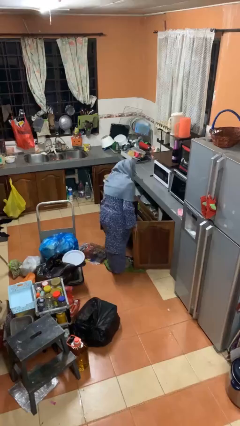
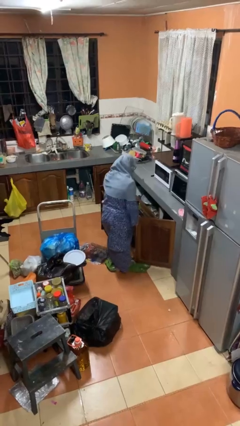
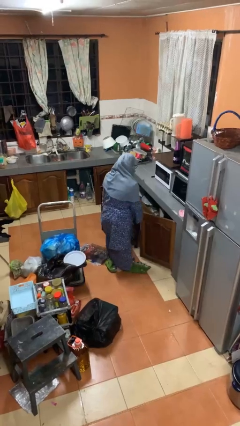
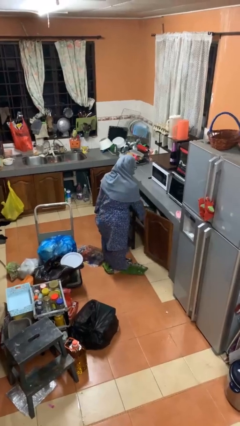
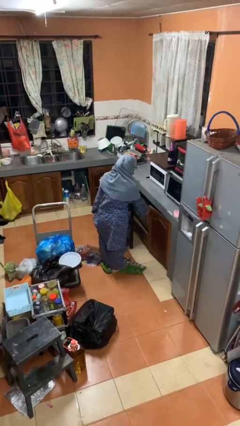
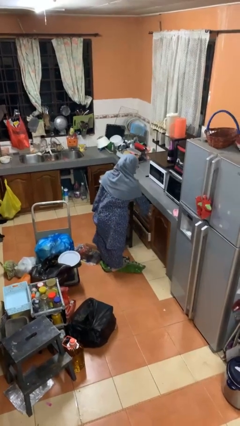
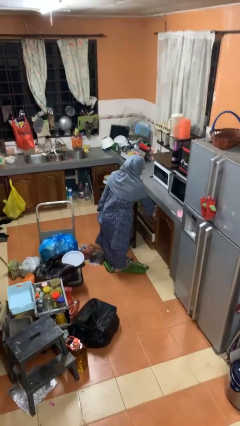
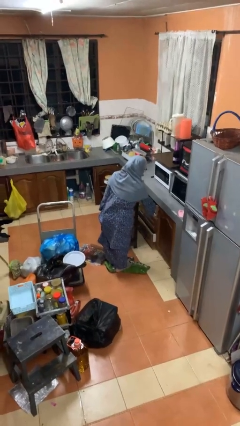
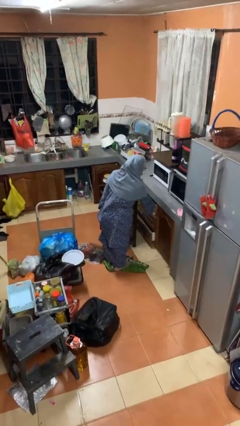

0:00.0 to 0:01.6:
person closes cabinet

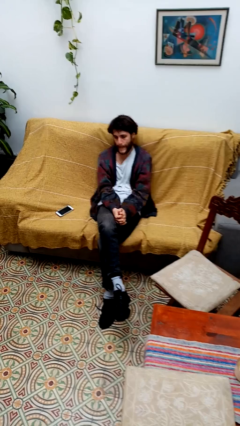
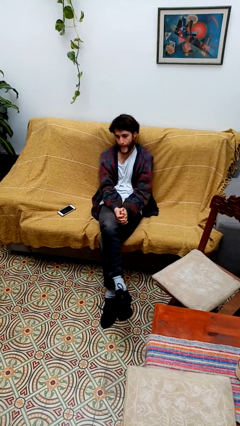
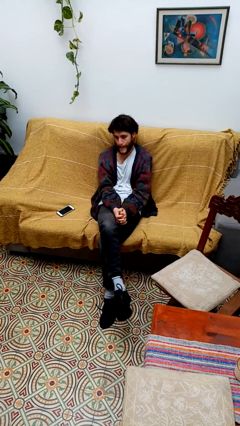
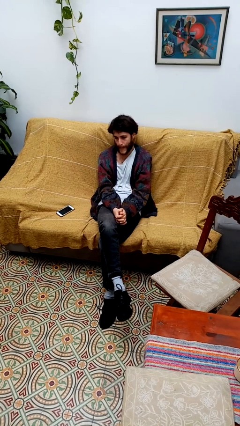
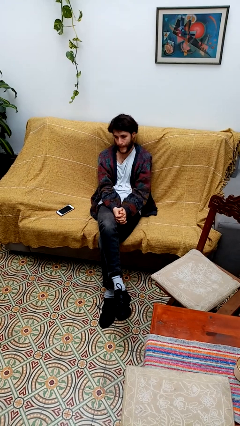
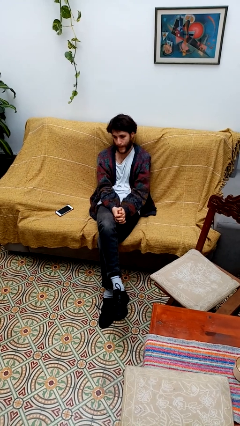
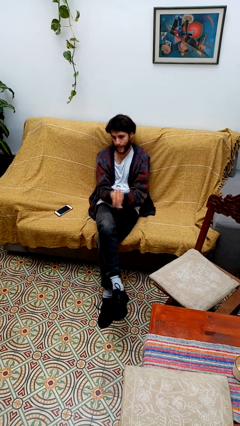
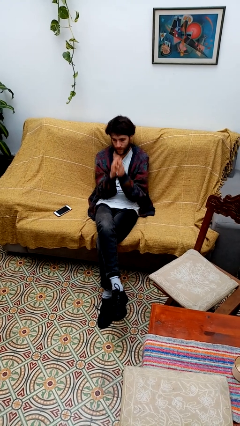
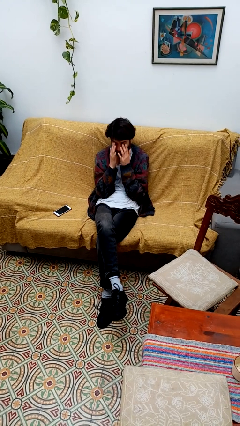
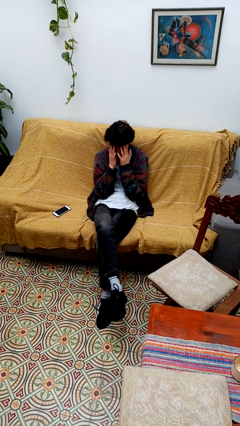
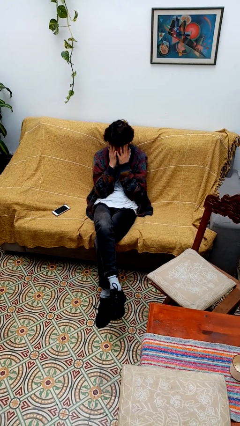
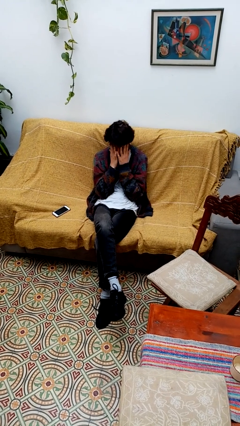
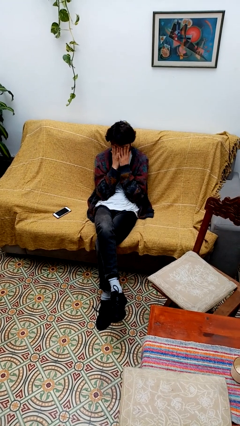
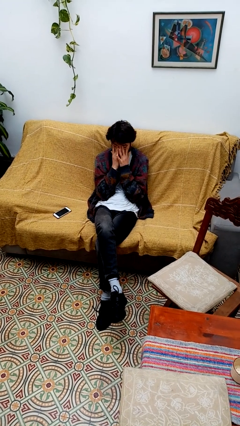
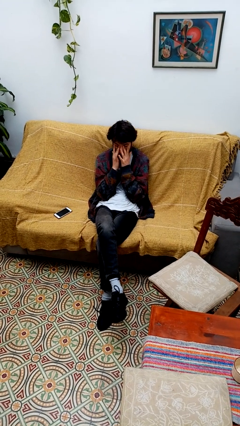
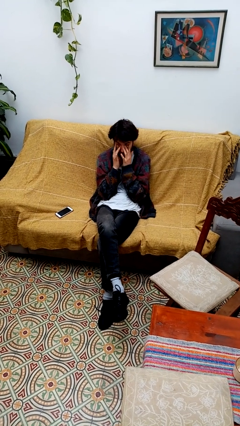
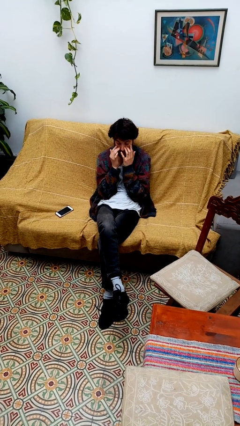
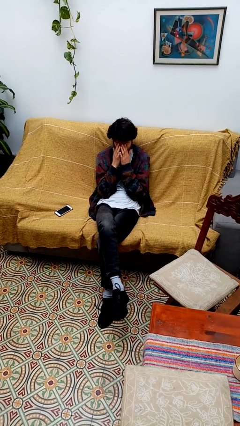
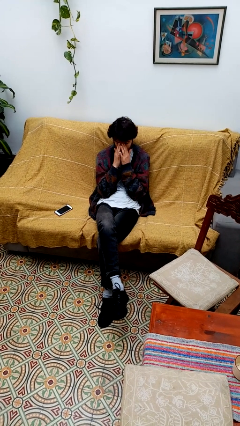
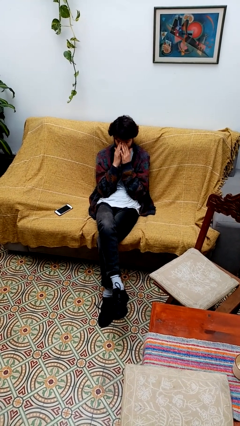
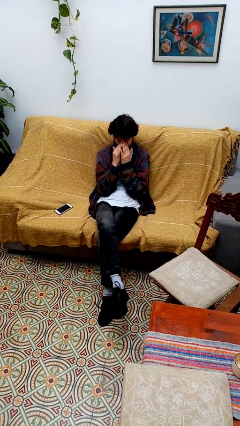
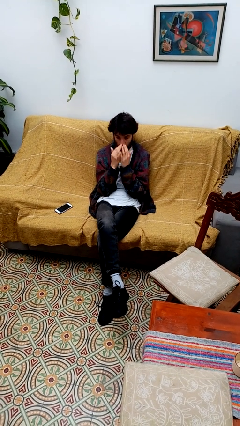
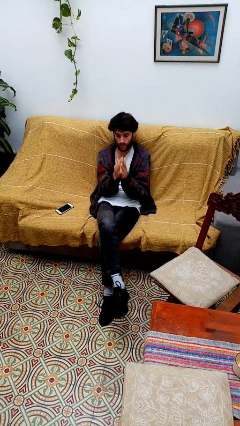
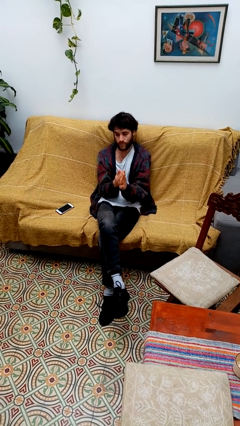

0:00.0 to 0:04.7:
person rubs eyes

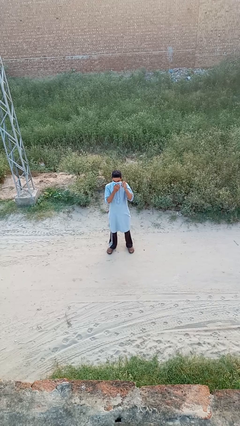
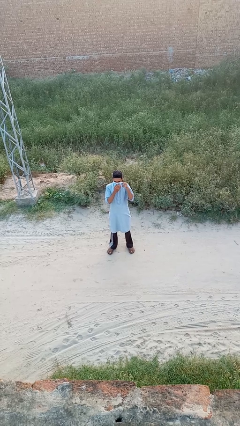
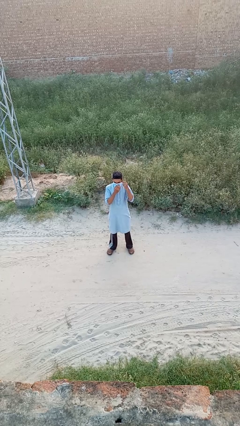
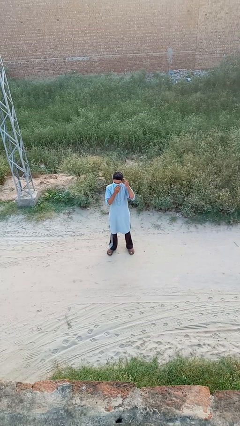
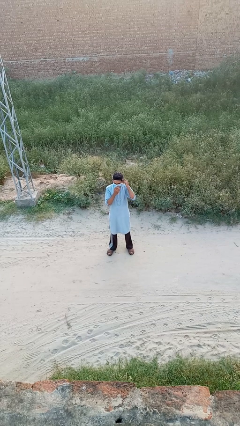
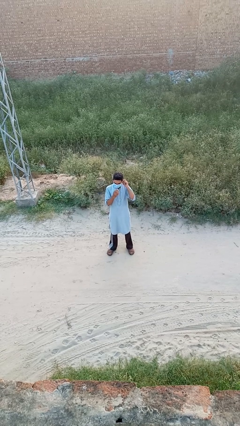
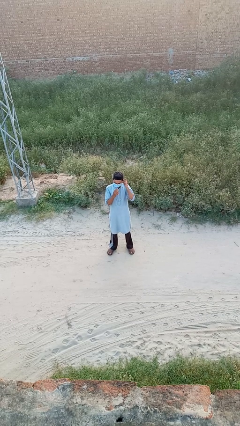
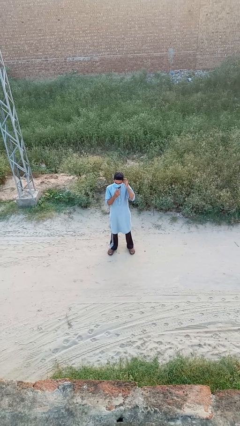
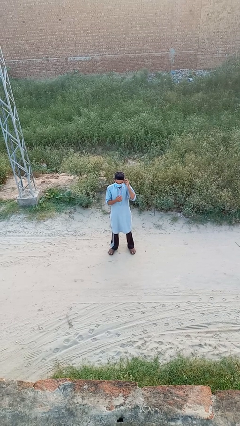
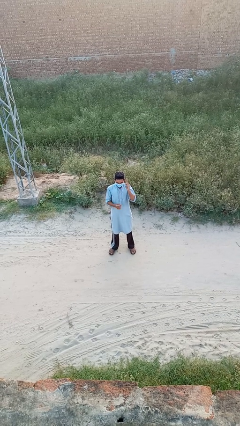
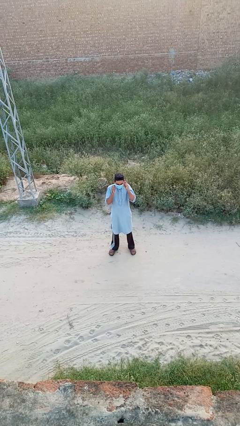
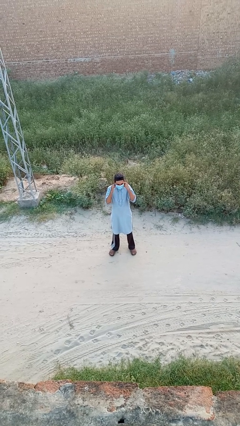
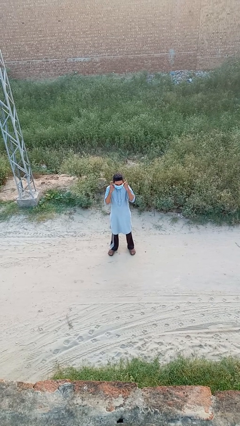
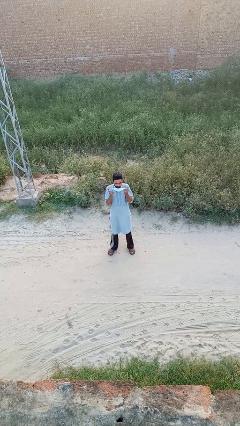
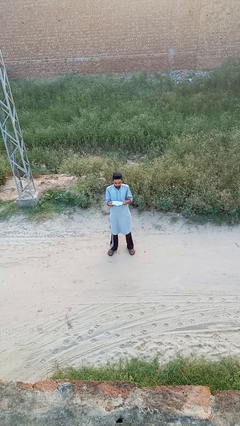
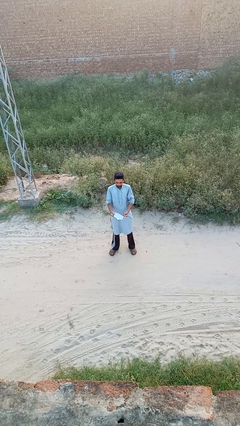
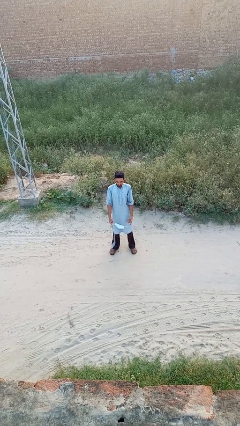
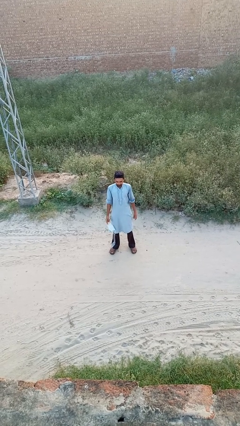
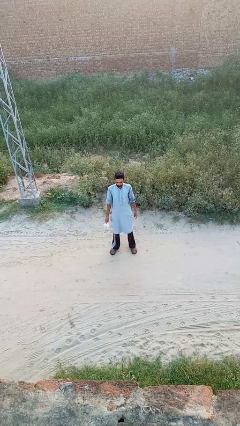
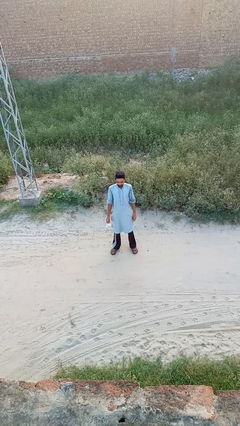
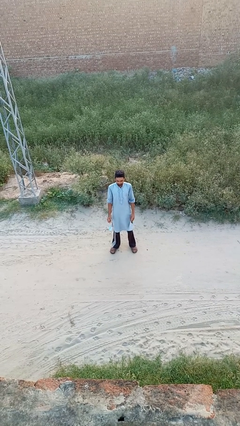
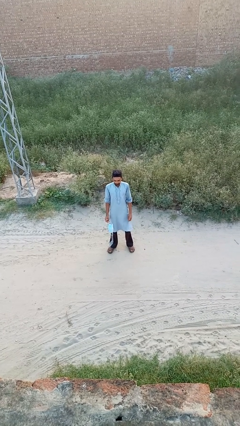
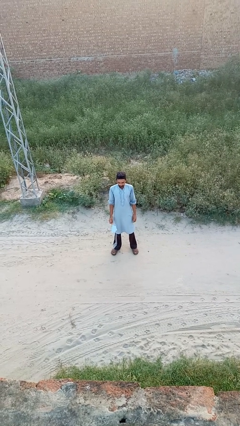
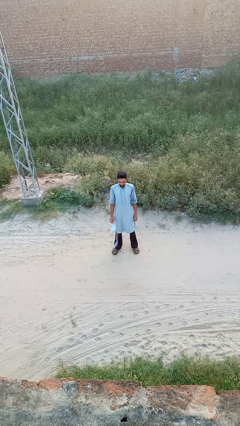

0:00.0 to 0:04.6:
person takes off facemask

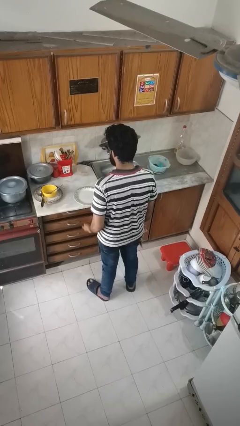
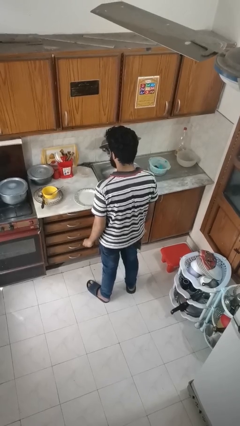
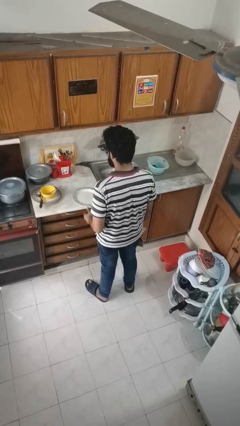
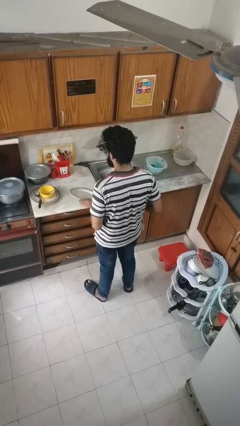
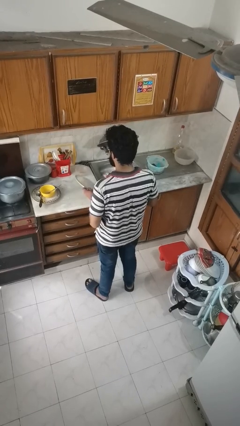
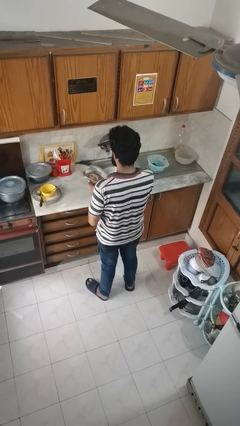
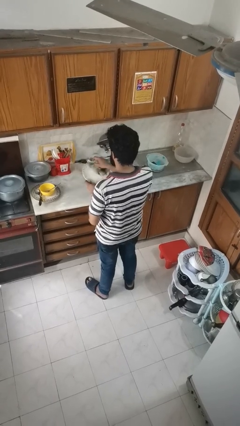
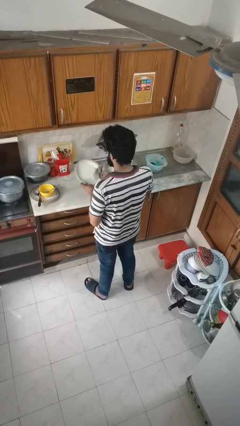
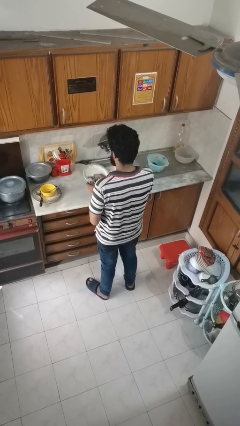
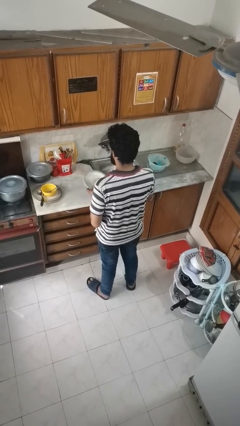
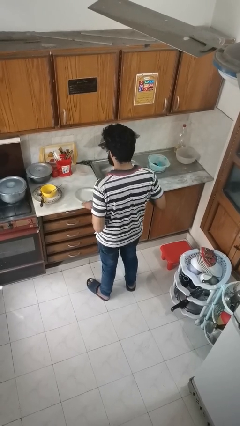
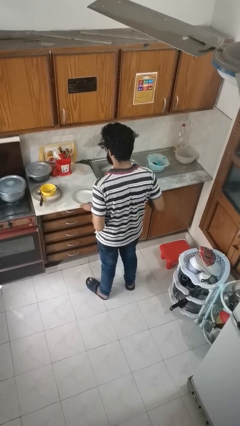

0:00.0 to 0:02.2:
person dries dish

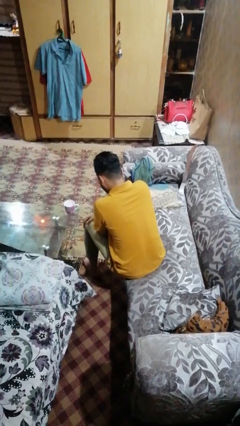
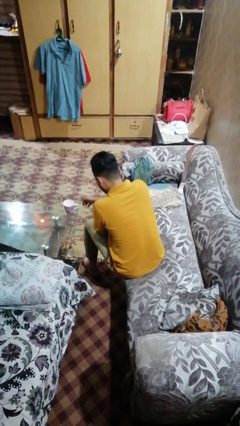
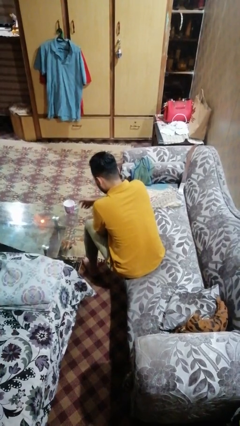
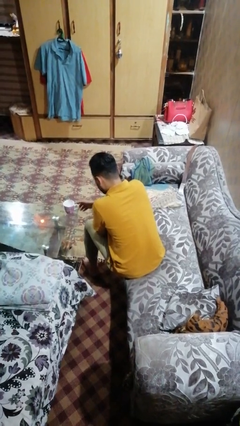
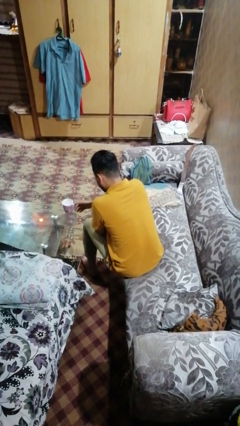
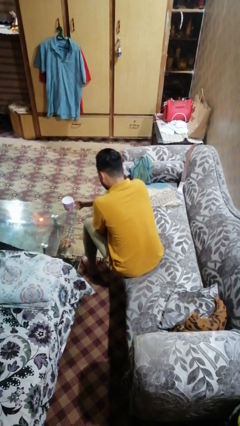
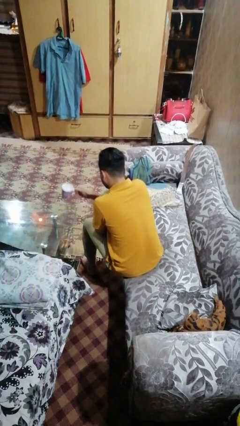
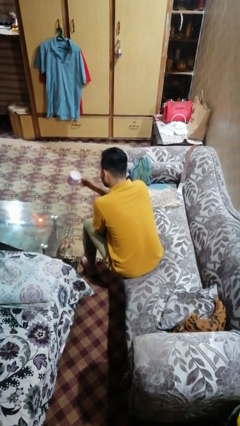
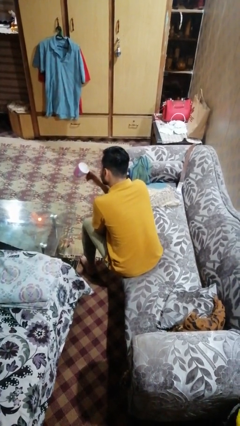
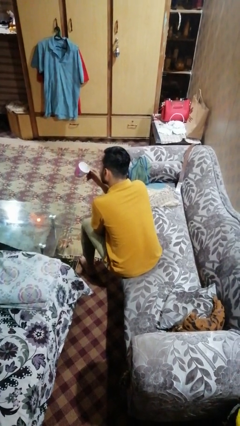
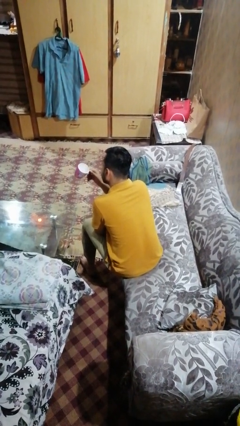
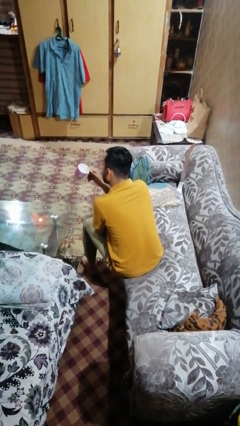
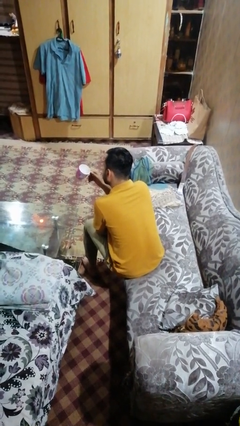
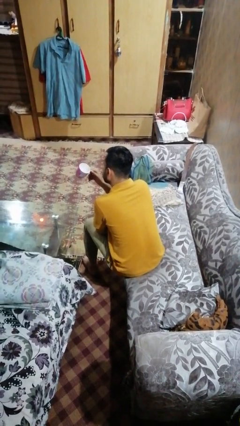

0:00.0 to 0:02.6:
person picks up object from table

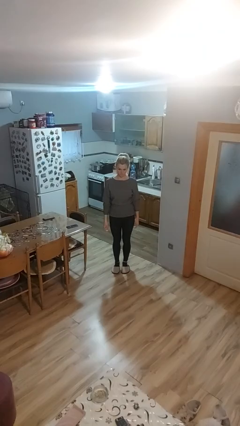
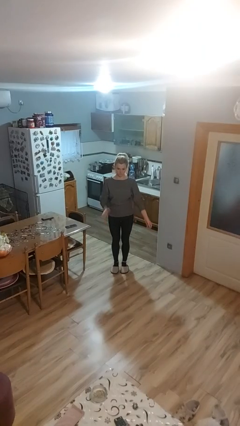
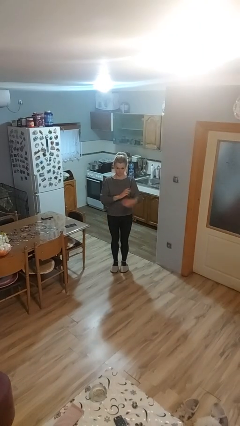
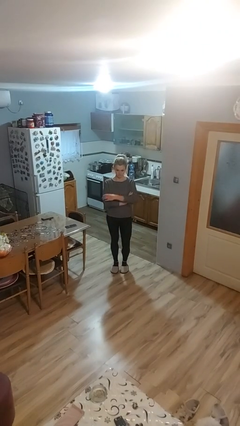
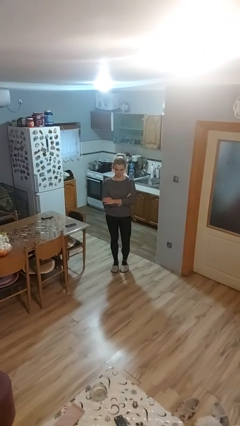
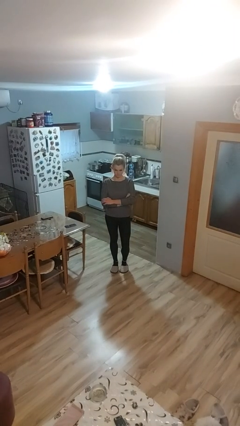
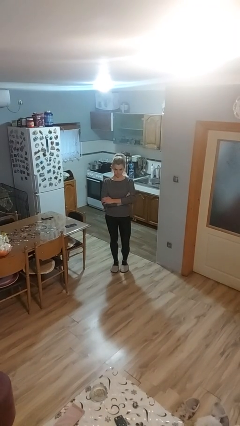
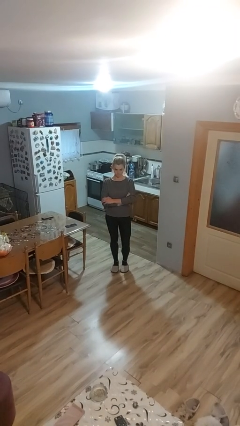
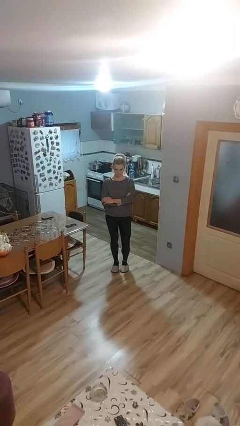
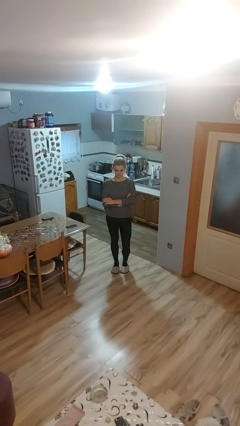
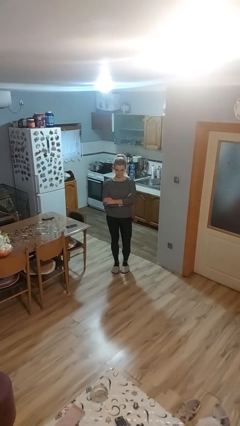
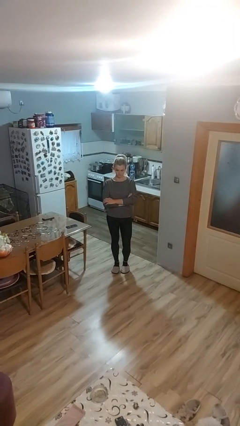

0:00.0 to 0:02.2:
person crosses arms
